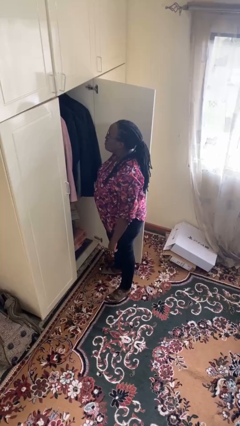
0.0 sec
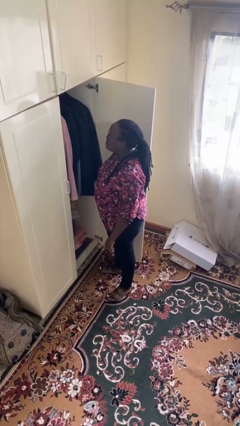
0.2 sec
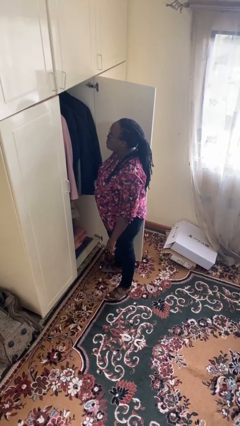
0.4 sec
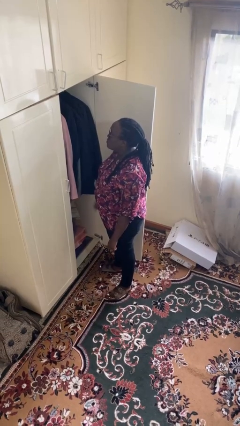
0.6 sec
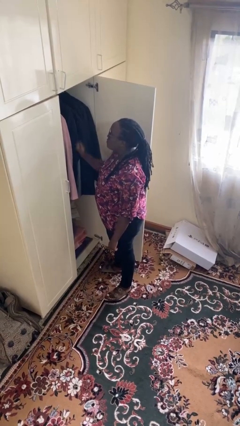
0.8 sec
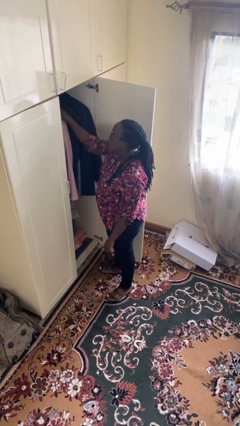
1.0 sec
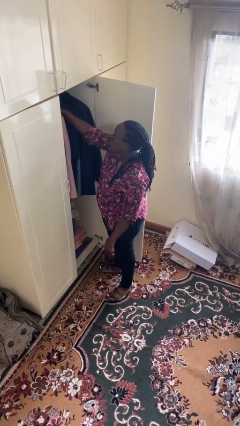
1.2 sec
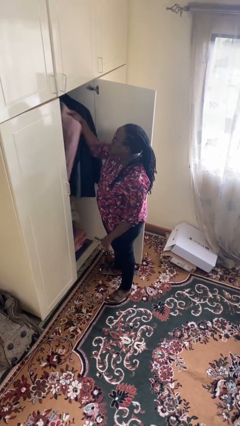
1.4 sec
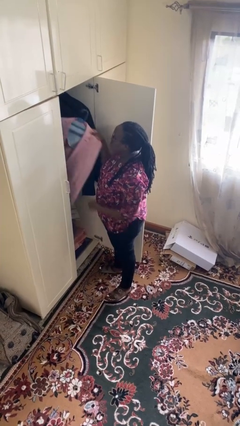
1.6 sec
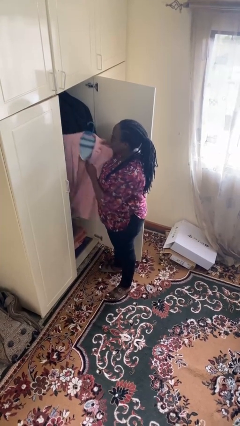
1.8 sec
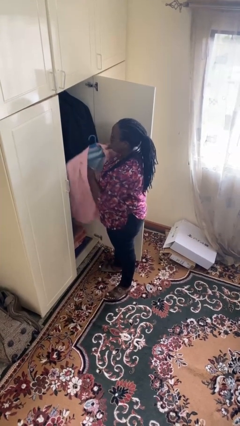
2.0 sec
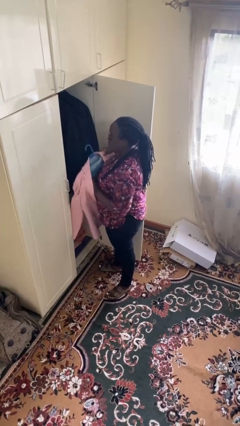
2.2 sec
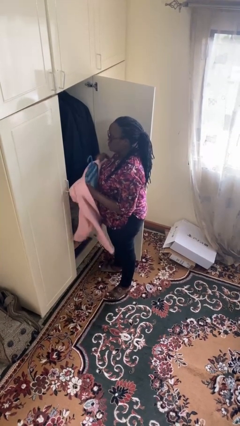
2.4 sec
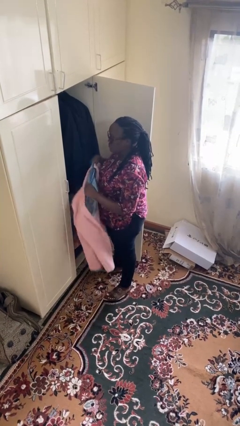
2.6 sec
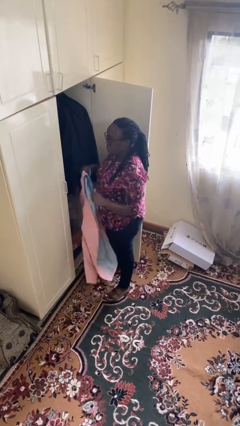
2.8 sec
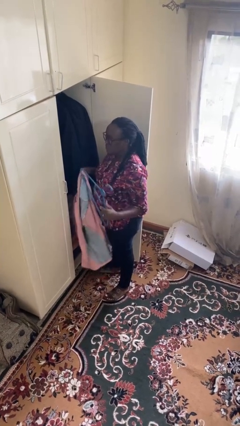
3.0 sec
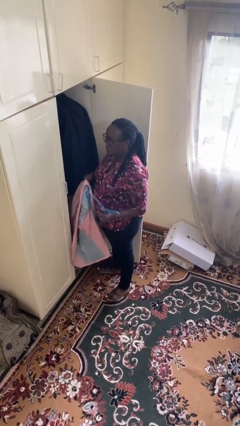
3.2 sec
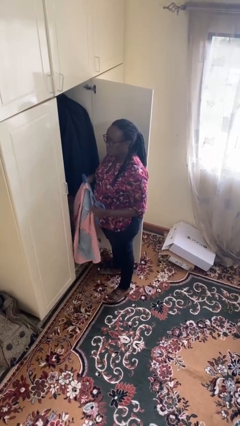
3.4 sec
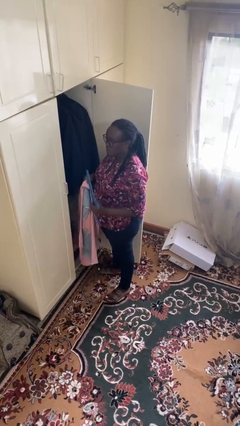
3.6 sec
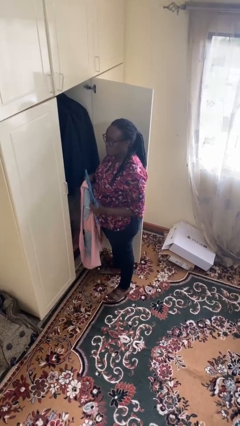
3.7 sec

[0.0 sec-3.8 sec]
person takes clothes from closet

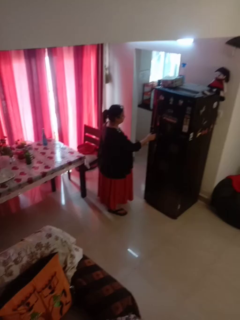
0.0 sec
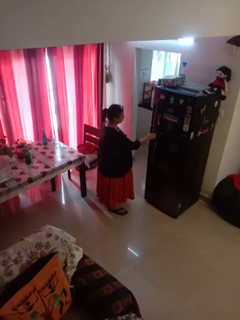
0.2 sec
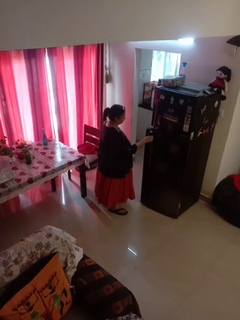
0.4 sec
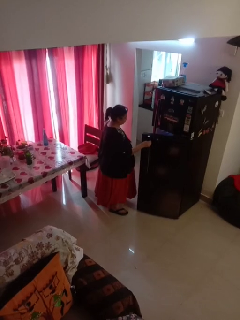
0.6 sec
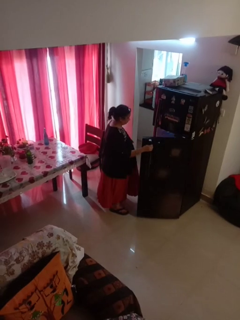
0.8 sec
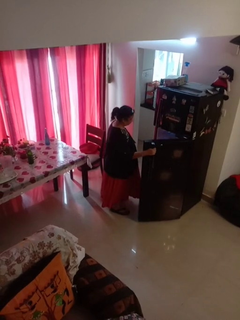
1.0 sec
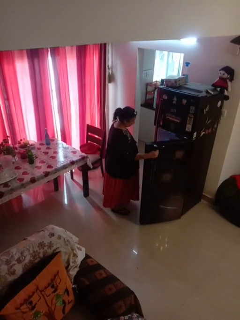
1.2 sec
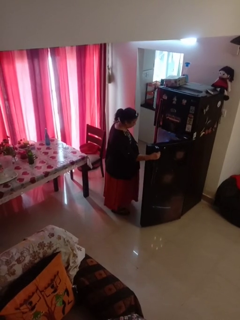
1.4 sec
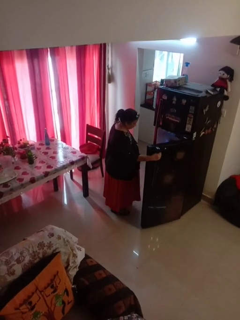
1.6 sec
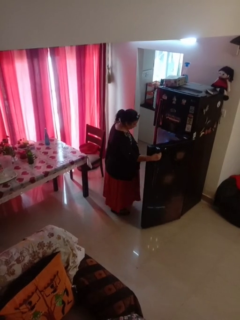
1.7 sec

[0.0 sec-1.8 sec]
person opens refrigerator

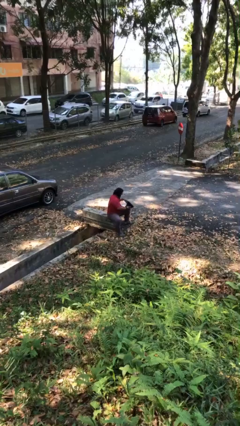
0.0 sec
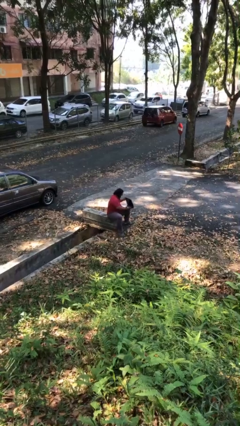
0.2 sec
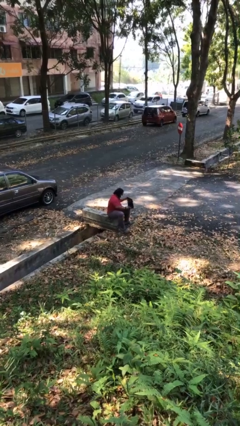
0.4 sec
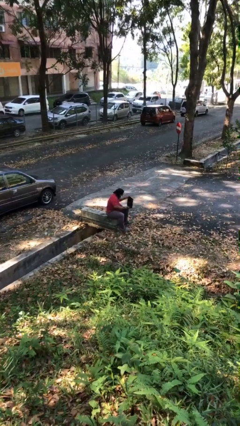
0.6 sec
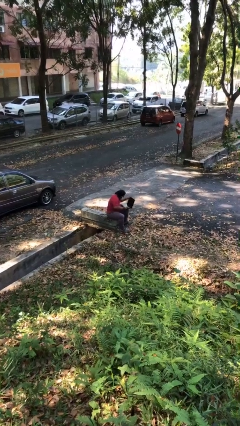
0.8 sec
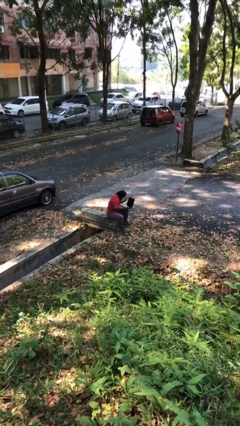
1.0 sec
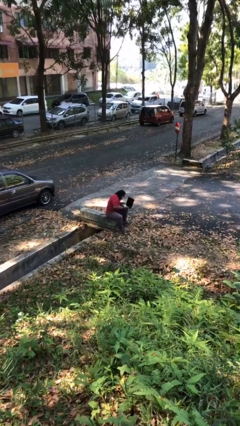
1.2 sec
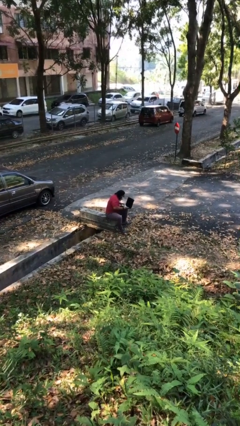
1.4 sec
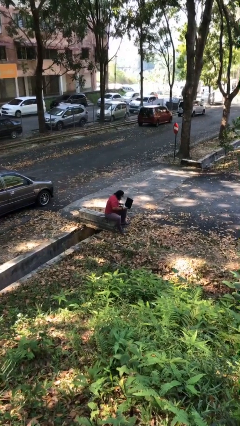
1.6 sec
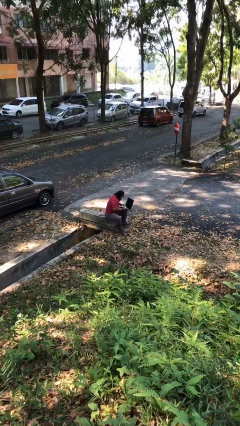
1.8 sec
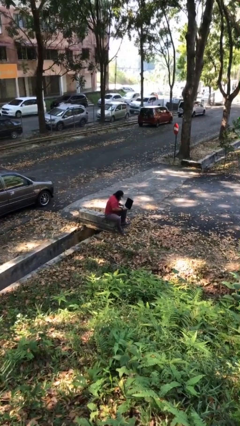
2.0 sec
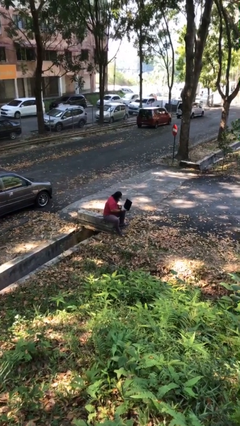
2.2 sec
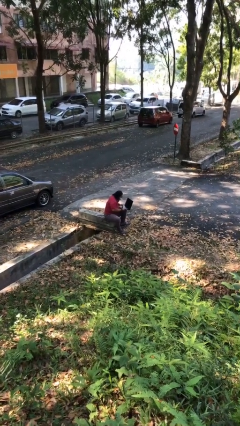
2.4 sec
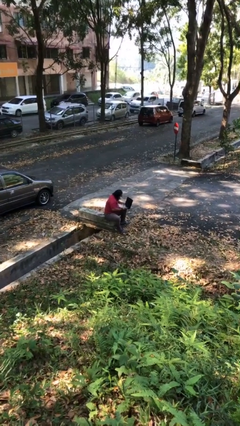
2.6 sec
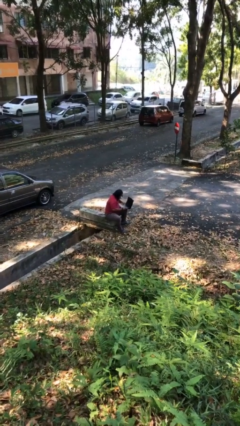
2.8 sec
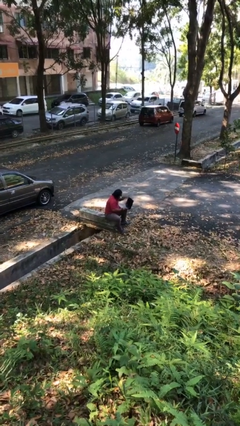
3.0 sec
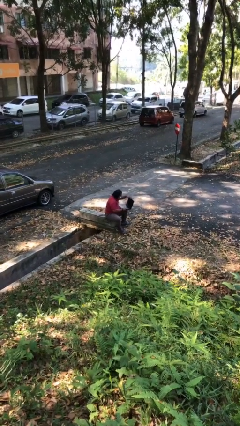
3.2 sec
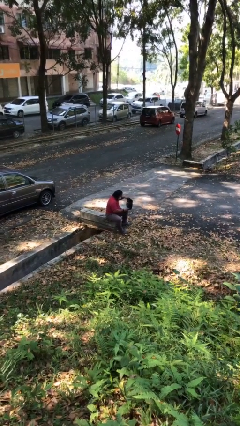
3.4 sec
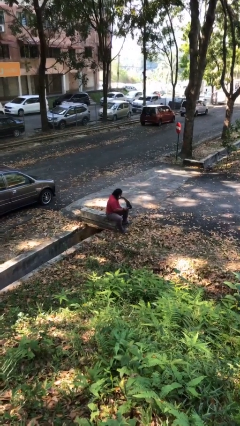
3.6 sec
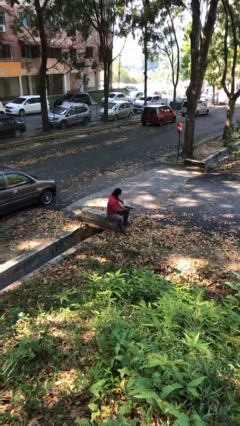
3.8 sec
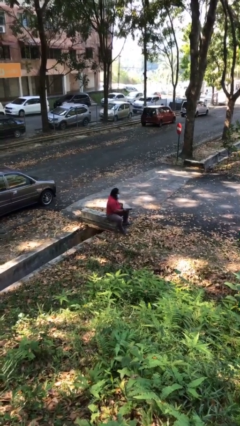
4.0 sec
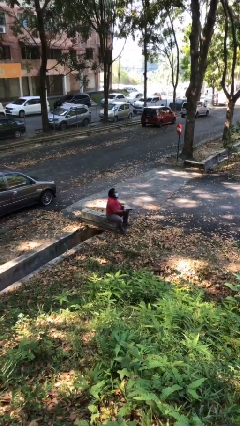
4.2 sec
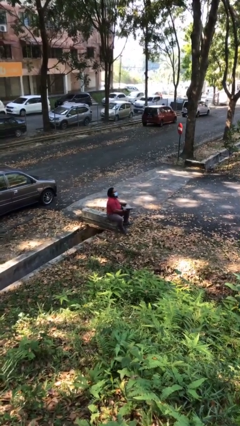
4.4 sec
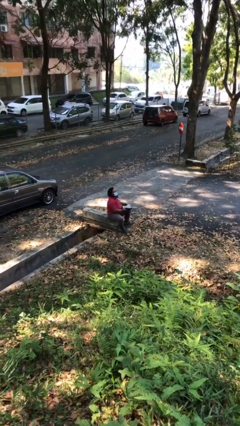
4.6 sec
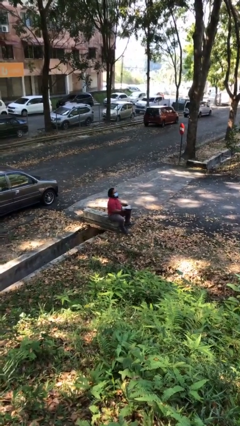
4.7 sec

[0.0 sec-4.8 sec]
person interacts with laptop

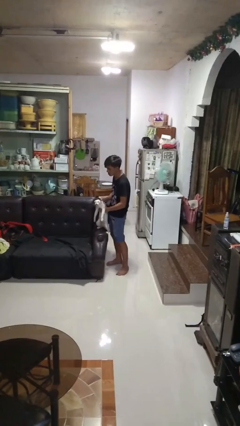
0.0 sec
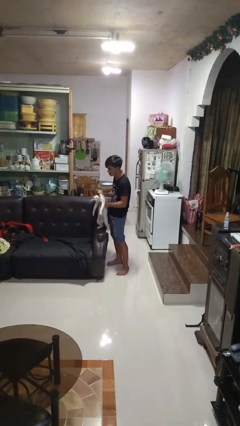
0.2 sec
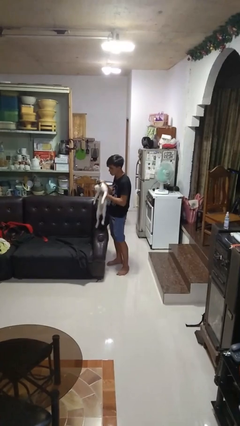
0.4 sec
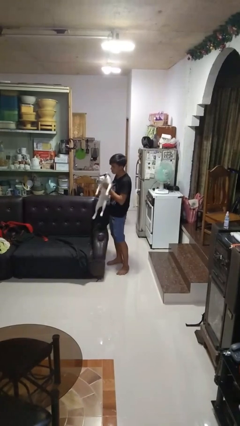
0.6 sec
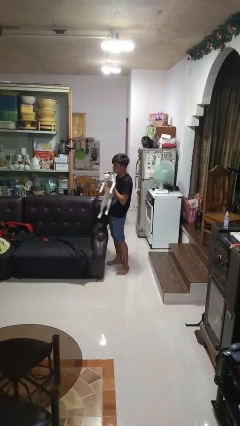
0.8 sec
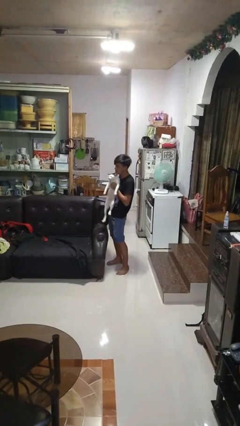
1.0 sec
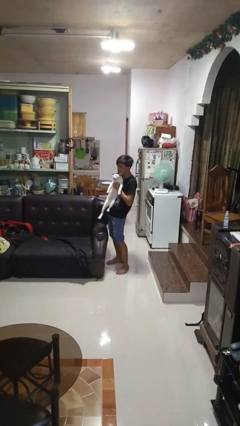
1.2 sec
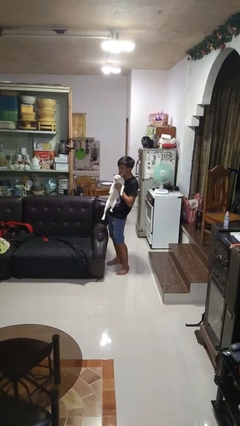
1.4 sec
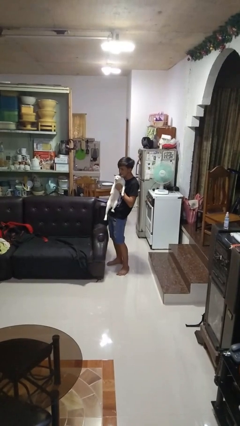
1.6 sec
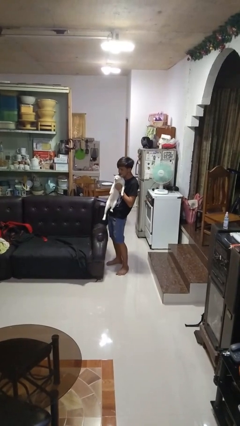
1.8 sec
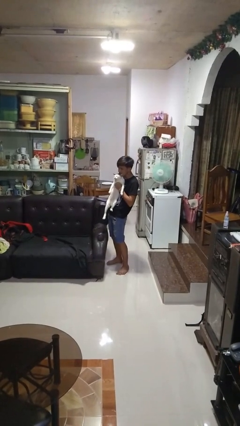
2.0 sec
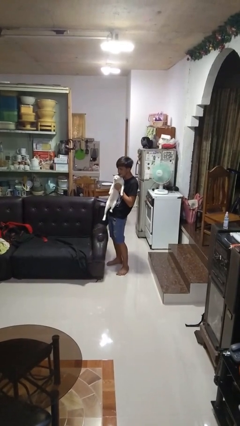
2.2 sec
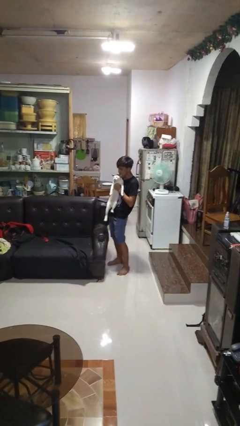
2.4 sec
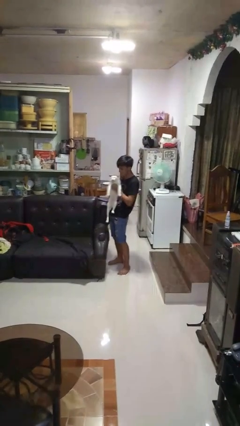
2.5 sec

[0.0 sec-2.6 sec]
person hugs cat

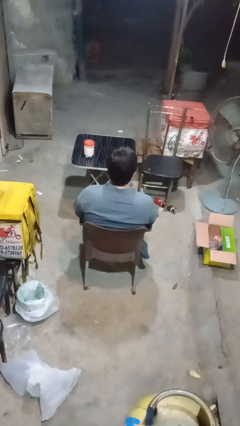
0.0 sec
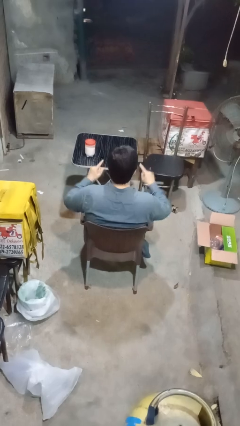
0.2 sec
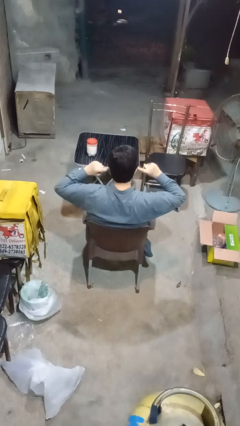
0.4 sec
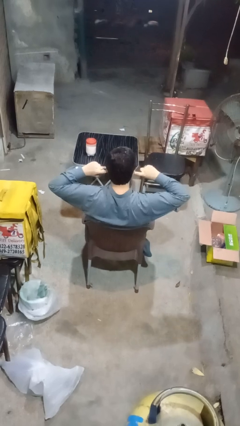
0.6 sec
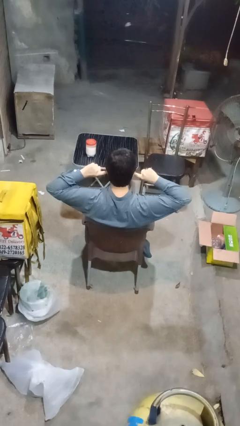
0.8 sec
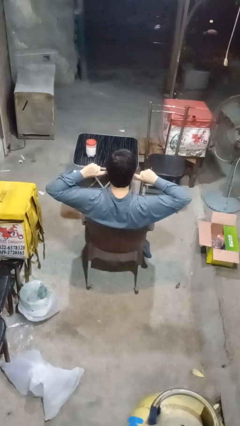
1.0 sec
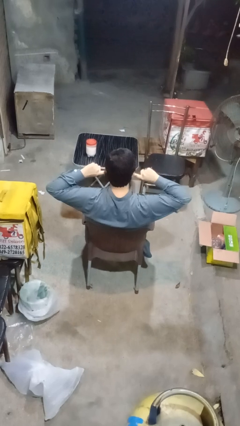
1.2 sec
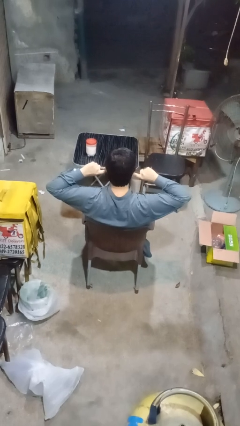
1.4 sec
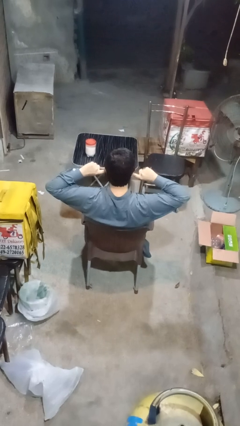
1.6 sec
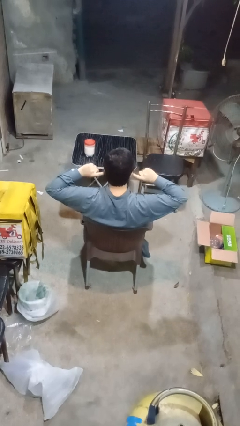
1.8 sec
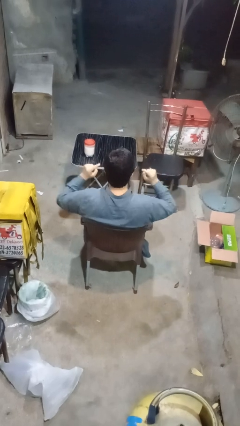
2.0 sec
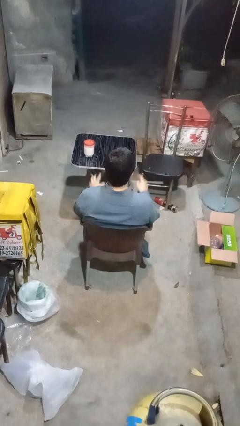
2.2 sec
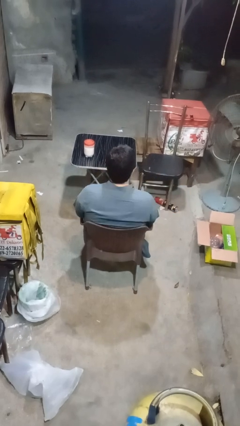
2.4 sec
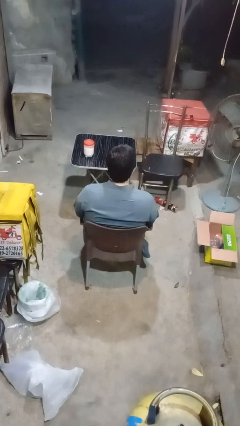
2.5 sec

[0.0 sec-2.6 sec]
person puts fingers in ear

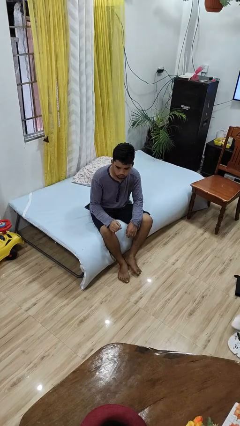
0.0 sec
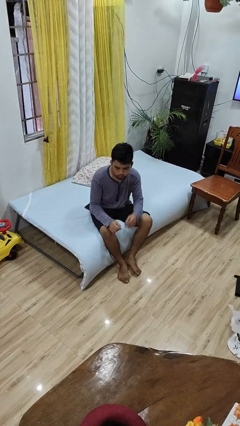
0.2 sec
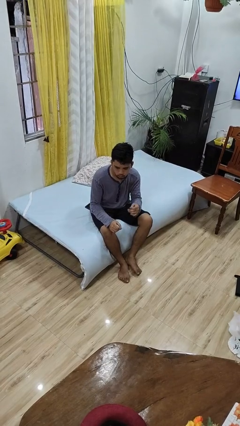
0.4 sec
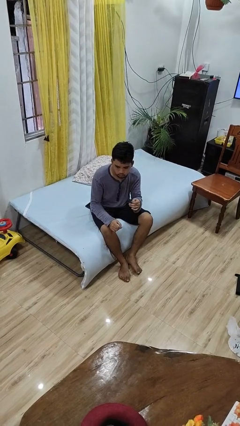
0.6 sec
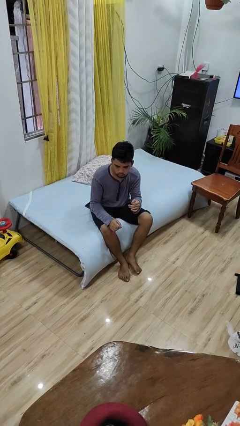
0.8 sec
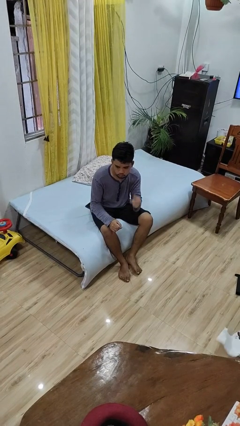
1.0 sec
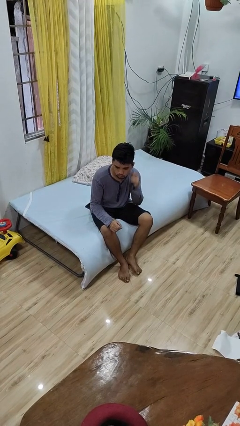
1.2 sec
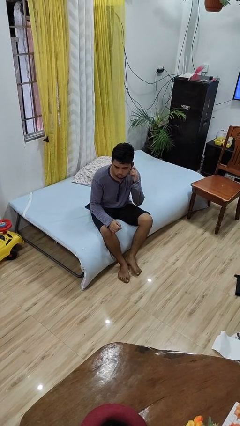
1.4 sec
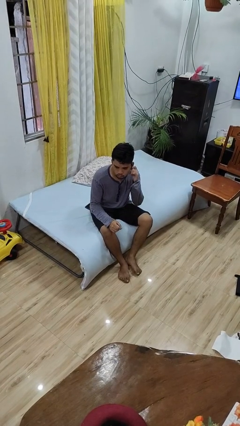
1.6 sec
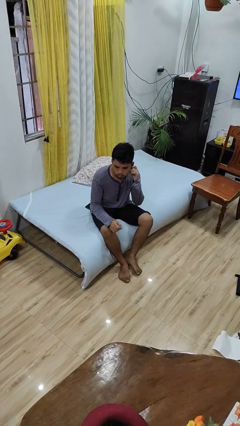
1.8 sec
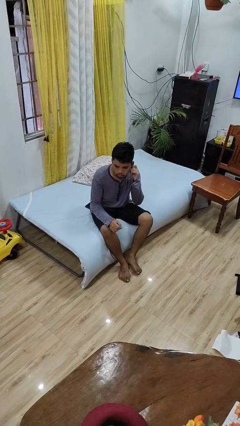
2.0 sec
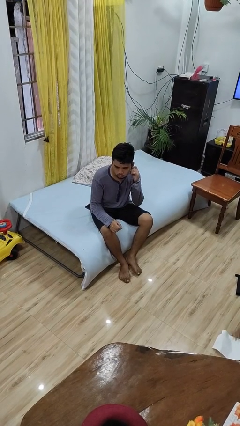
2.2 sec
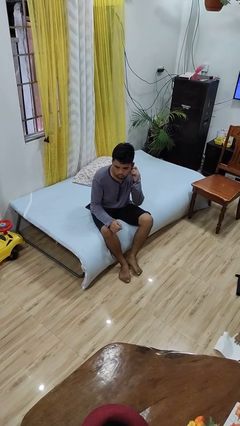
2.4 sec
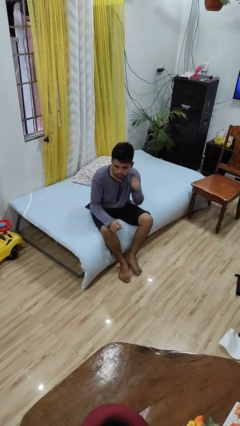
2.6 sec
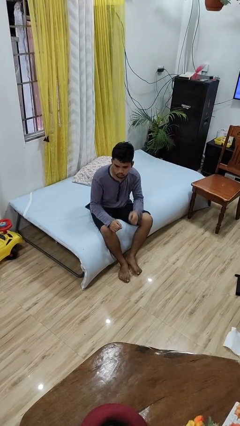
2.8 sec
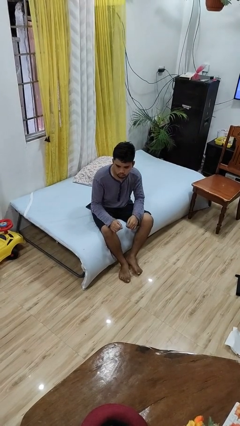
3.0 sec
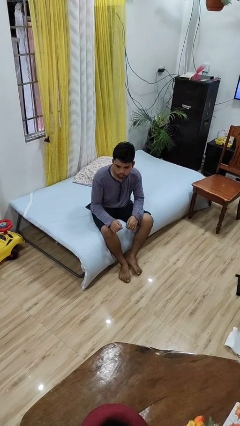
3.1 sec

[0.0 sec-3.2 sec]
person touches earlobe
